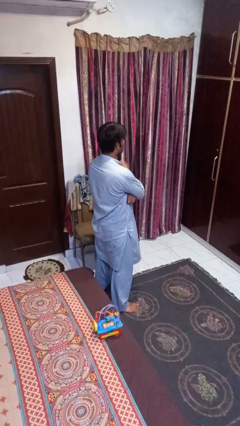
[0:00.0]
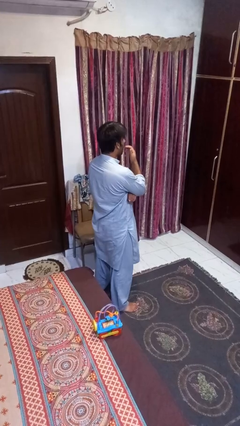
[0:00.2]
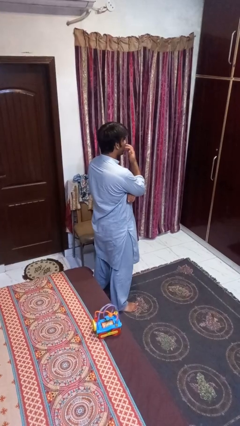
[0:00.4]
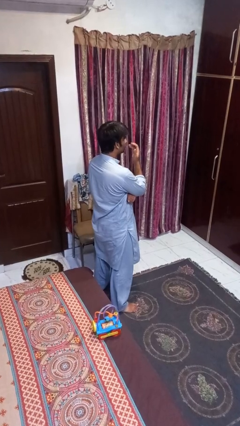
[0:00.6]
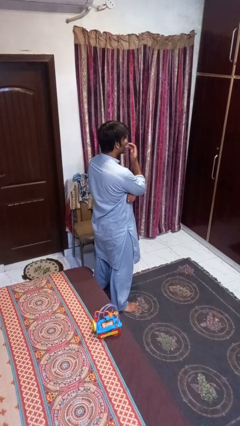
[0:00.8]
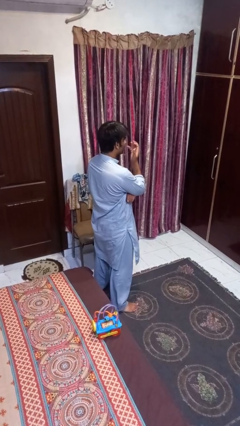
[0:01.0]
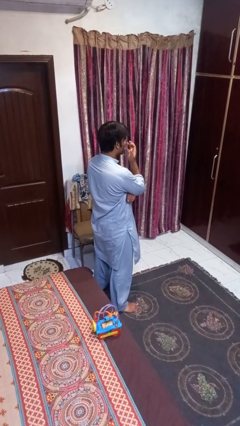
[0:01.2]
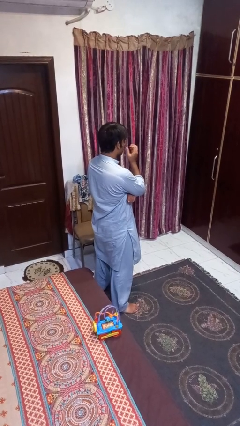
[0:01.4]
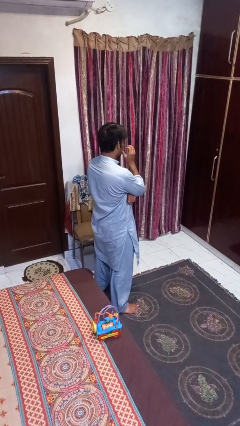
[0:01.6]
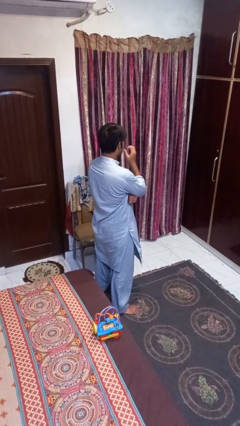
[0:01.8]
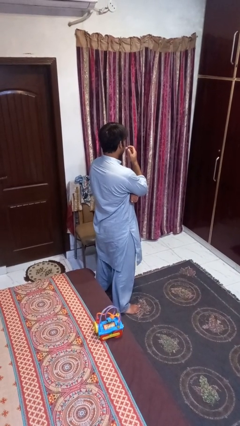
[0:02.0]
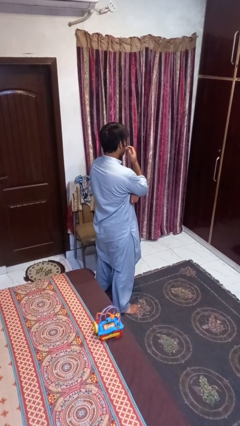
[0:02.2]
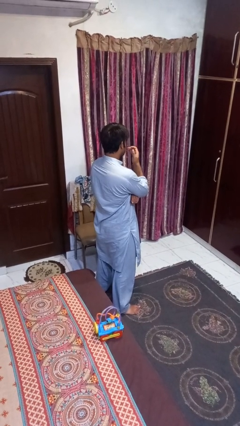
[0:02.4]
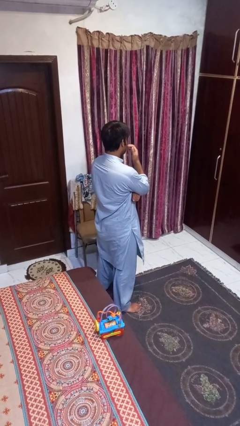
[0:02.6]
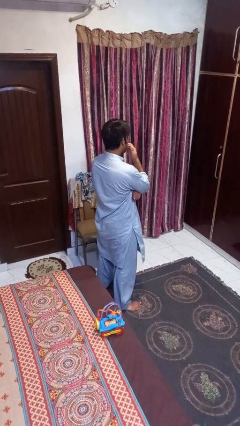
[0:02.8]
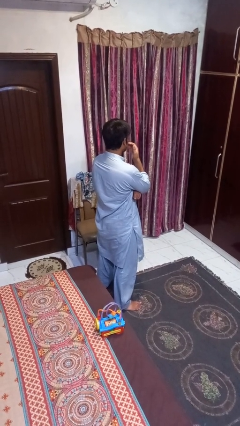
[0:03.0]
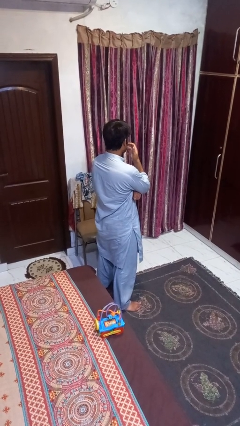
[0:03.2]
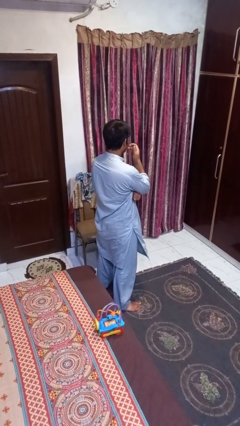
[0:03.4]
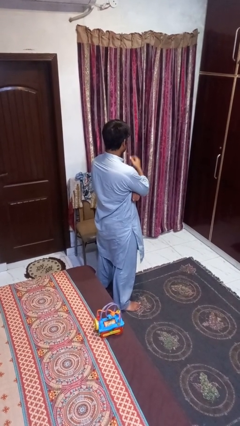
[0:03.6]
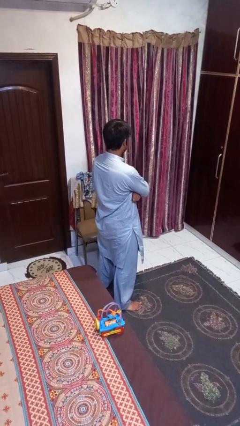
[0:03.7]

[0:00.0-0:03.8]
person licks fingers

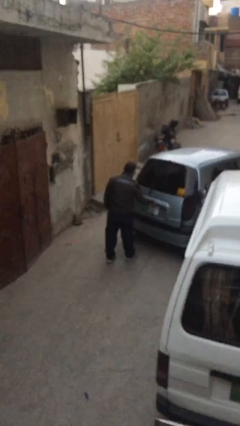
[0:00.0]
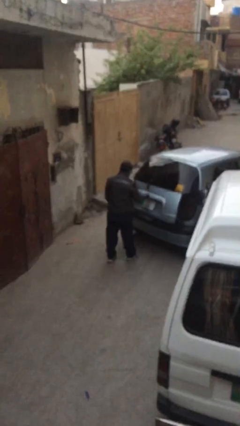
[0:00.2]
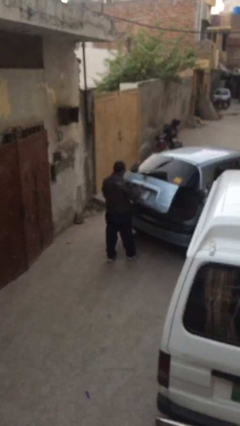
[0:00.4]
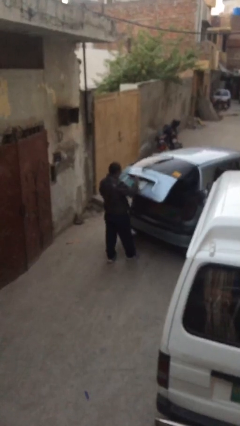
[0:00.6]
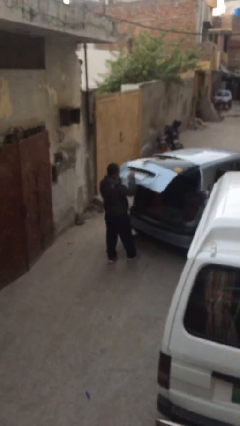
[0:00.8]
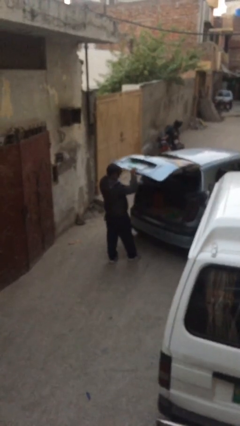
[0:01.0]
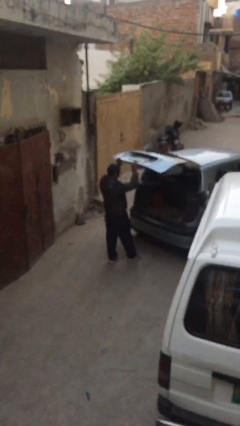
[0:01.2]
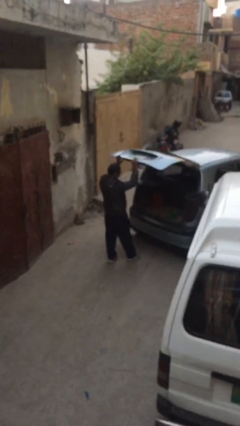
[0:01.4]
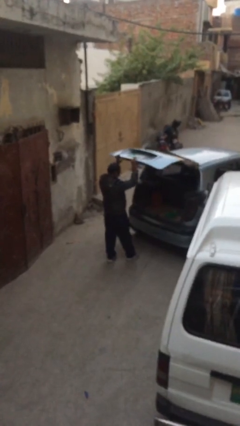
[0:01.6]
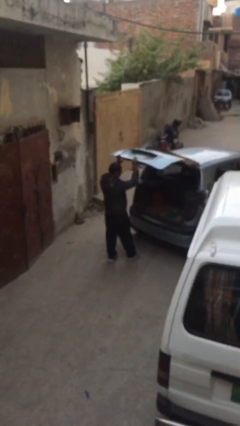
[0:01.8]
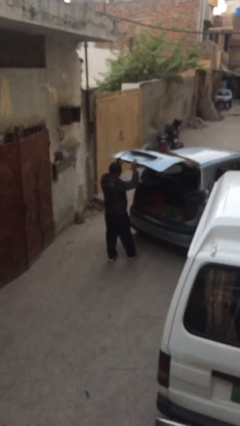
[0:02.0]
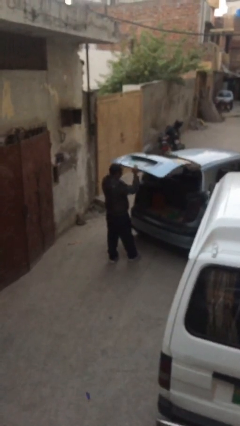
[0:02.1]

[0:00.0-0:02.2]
person opens car trunk

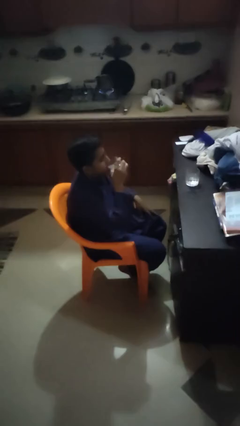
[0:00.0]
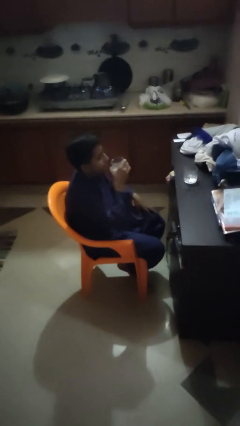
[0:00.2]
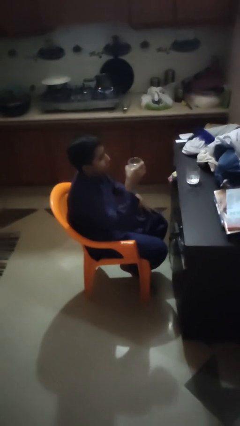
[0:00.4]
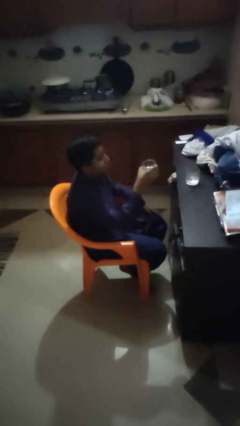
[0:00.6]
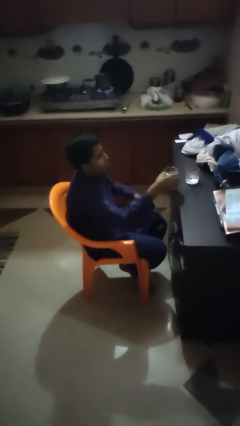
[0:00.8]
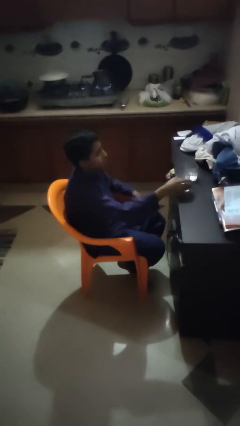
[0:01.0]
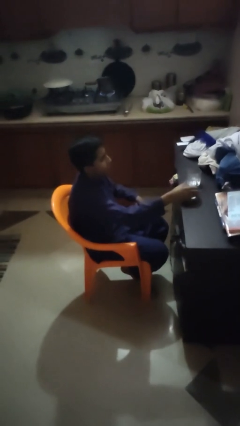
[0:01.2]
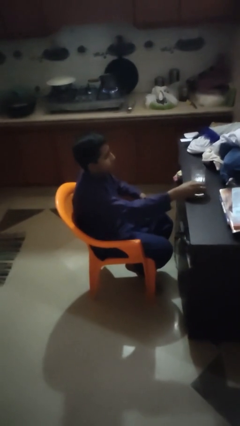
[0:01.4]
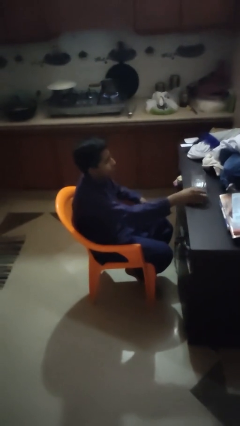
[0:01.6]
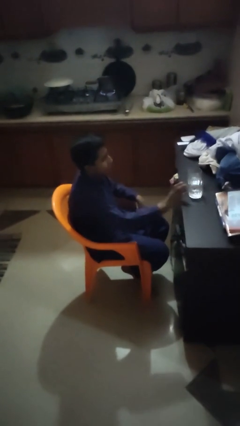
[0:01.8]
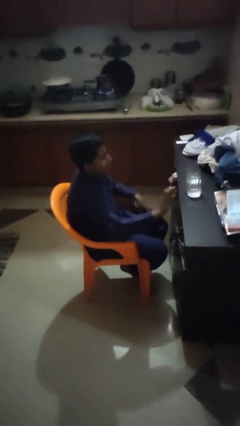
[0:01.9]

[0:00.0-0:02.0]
person puts down object on table

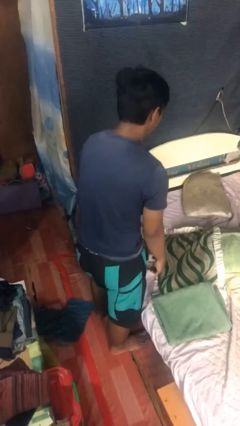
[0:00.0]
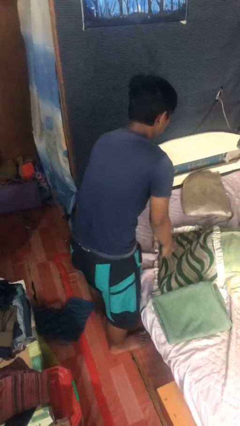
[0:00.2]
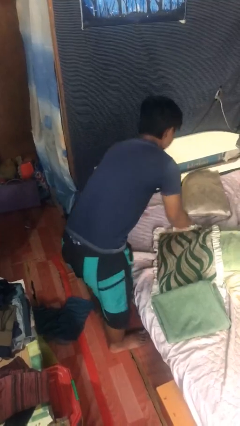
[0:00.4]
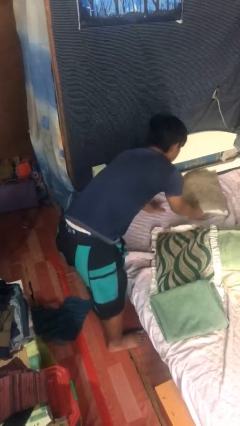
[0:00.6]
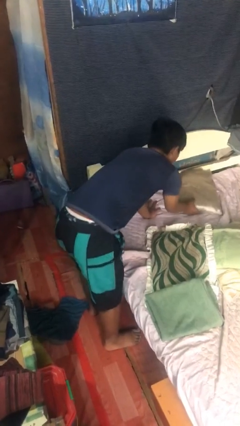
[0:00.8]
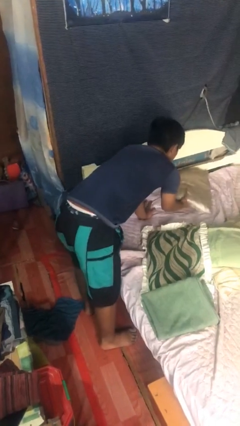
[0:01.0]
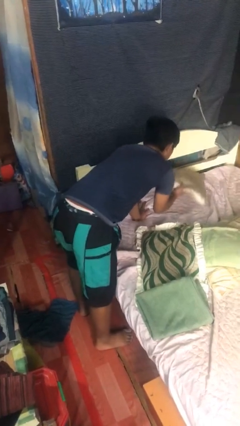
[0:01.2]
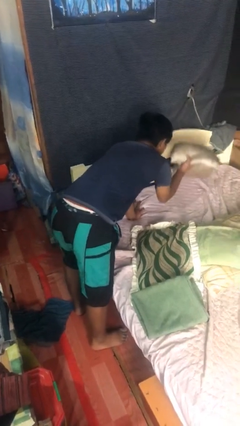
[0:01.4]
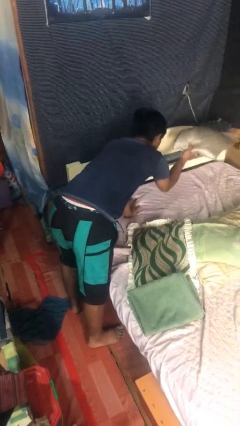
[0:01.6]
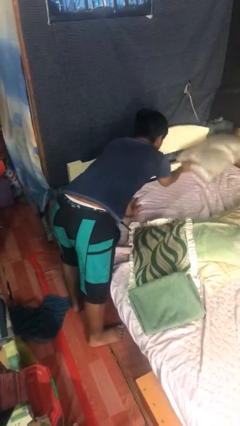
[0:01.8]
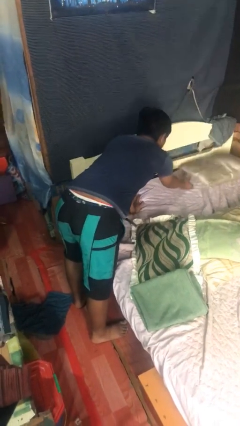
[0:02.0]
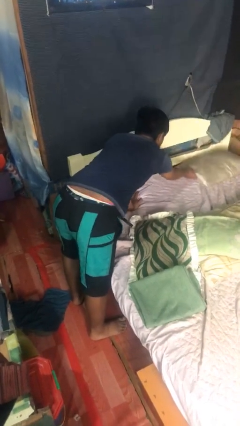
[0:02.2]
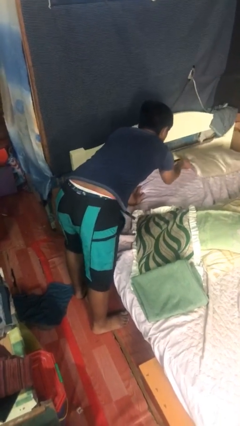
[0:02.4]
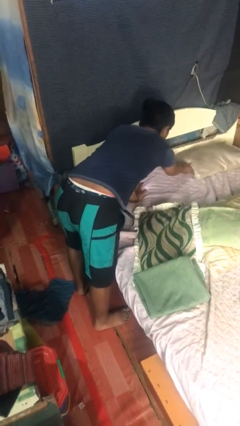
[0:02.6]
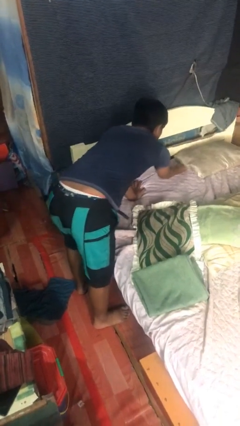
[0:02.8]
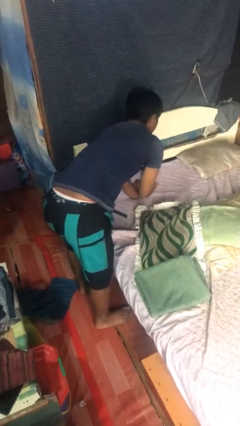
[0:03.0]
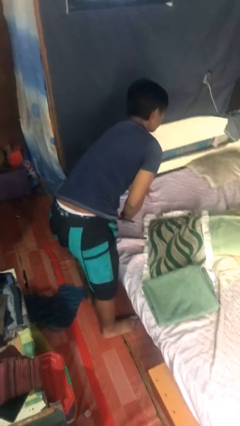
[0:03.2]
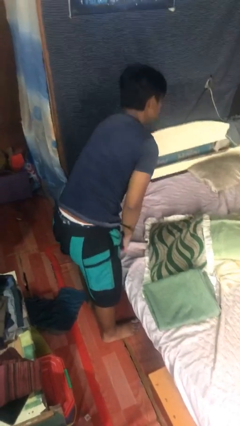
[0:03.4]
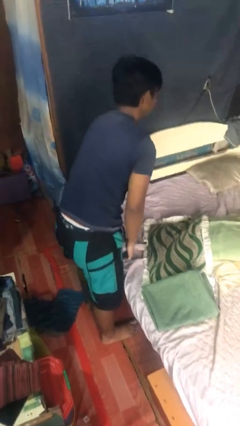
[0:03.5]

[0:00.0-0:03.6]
person makes bed

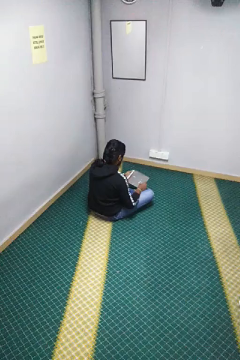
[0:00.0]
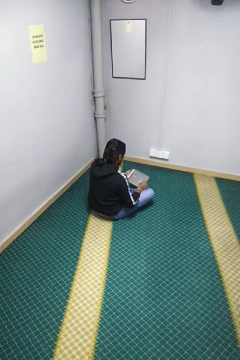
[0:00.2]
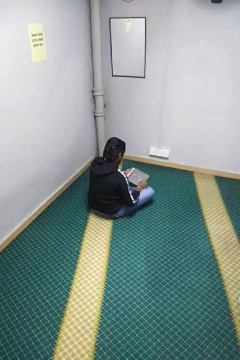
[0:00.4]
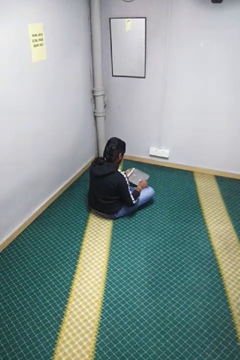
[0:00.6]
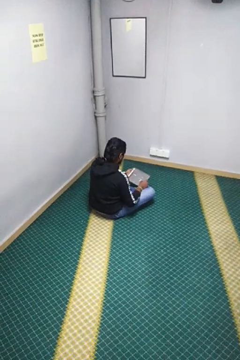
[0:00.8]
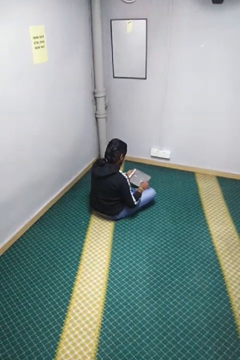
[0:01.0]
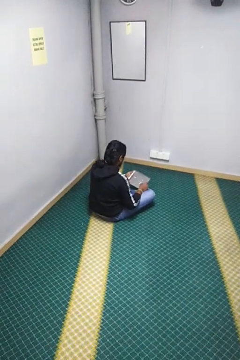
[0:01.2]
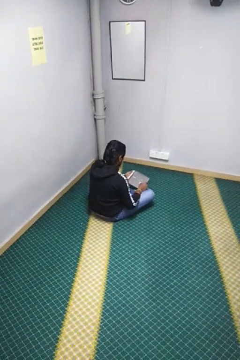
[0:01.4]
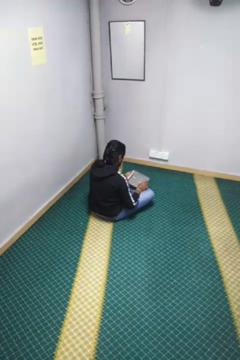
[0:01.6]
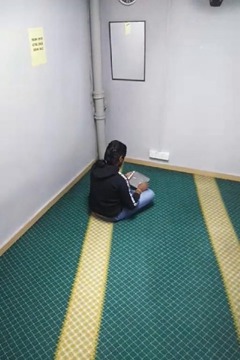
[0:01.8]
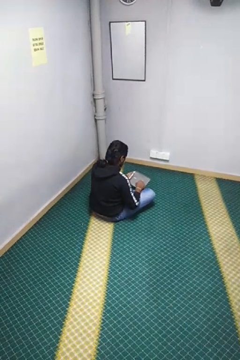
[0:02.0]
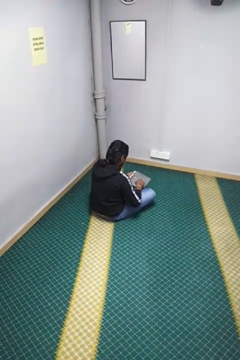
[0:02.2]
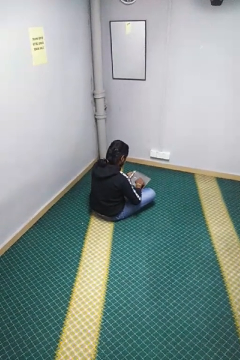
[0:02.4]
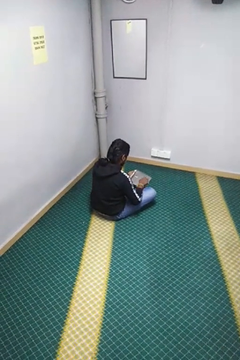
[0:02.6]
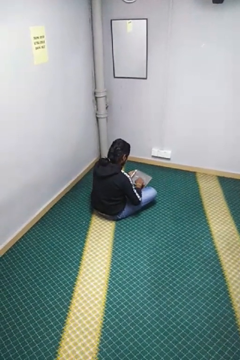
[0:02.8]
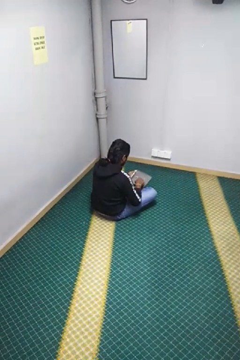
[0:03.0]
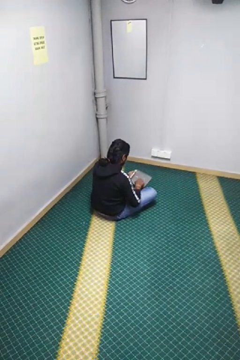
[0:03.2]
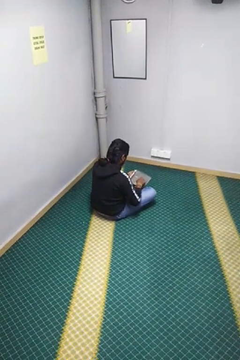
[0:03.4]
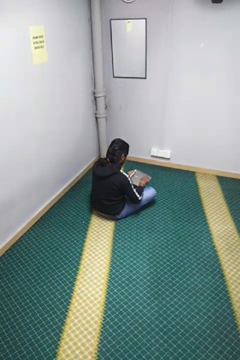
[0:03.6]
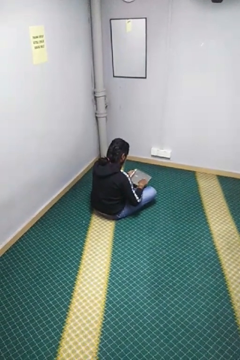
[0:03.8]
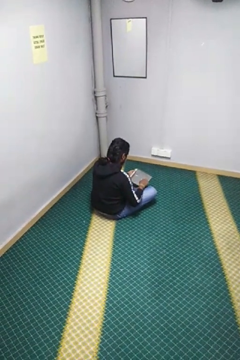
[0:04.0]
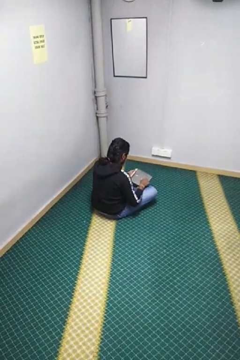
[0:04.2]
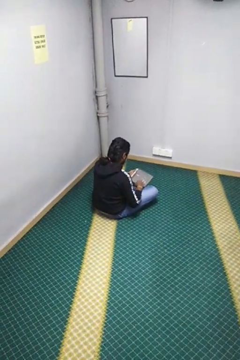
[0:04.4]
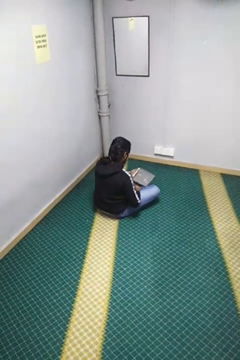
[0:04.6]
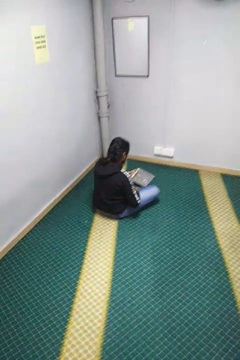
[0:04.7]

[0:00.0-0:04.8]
person interacts with tablet

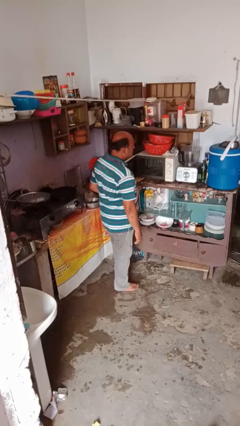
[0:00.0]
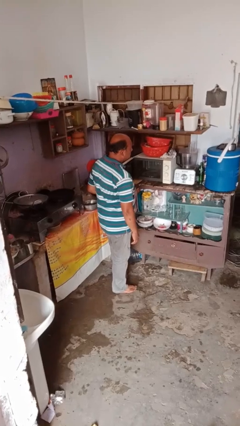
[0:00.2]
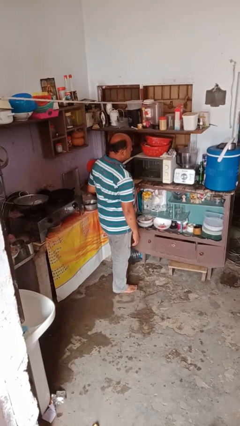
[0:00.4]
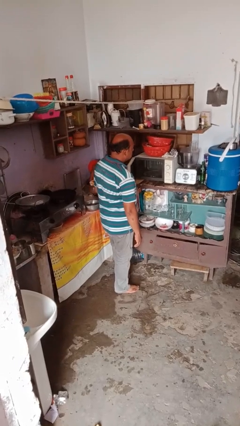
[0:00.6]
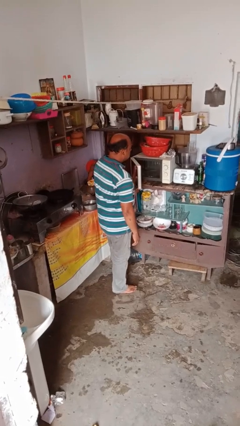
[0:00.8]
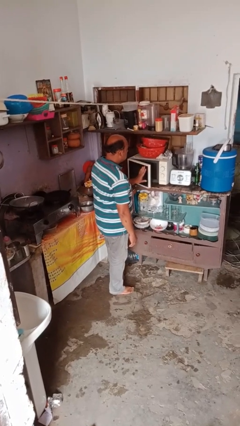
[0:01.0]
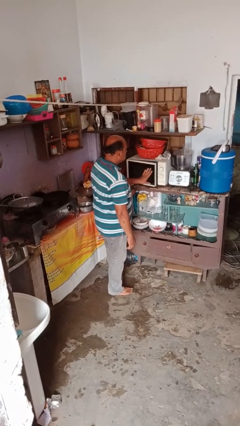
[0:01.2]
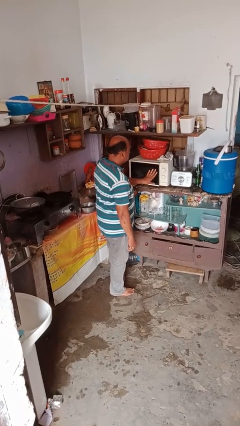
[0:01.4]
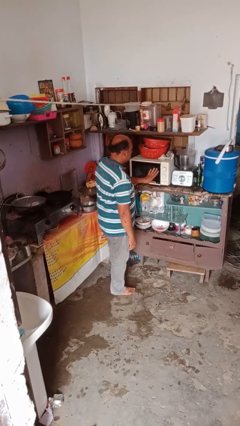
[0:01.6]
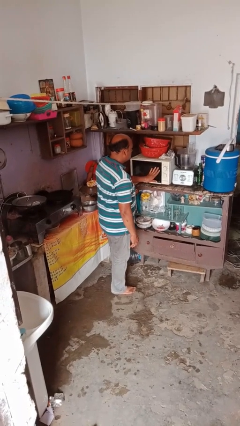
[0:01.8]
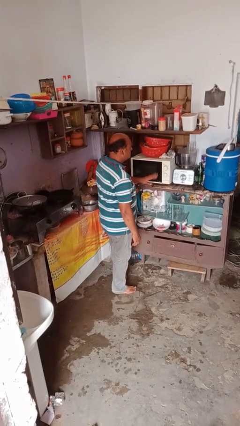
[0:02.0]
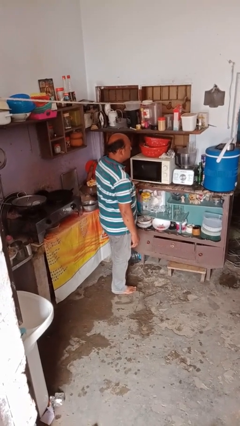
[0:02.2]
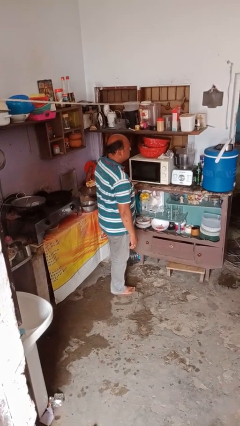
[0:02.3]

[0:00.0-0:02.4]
person closes microwave
